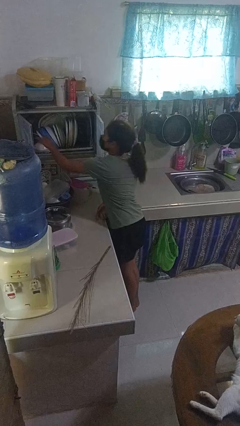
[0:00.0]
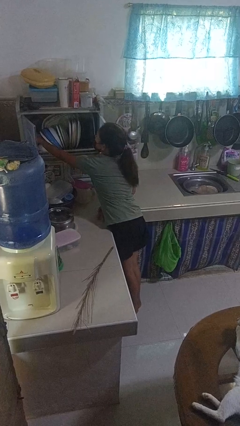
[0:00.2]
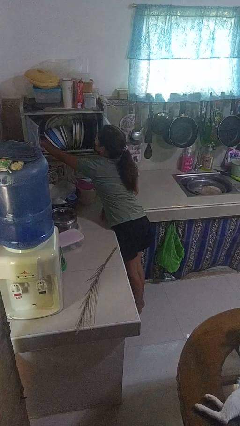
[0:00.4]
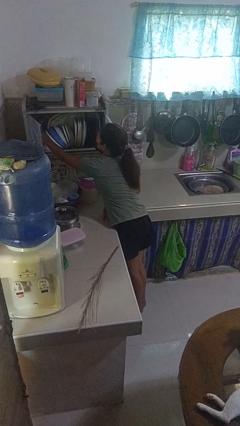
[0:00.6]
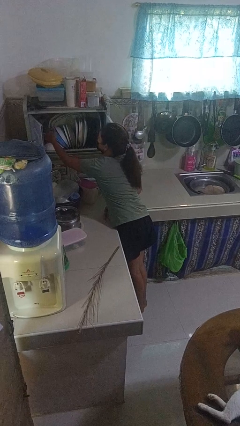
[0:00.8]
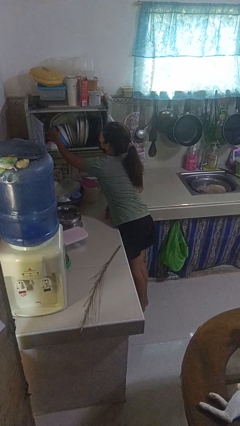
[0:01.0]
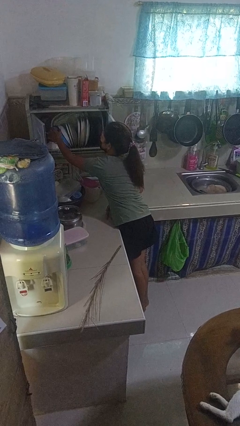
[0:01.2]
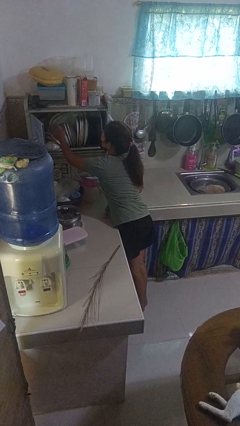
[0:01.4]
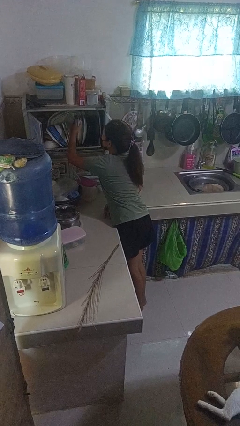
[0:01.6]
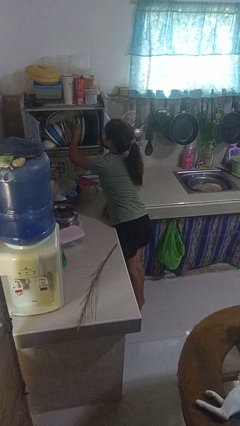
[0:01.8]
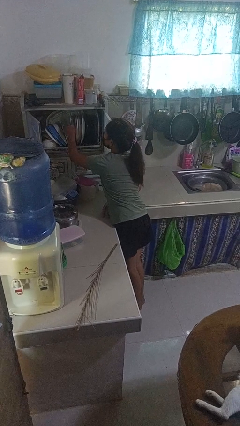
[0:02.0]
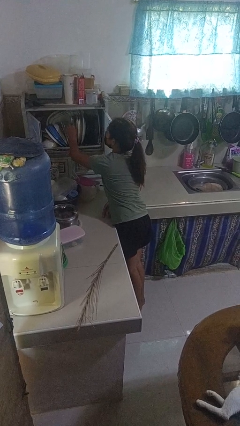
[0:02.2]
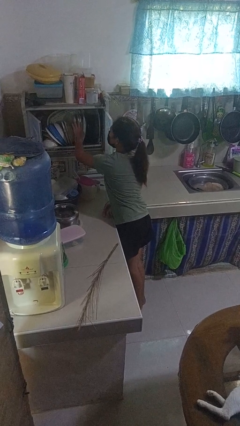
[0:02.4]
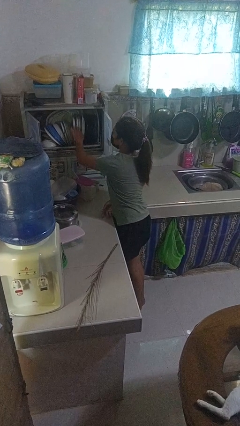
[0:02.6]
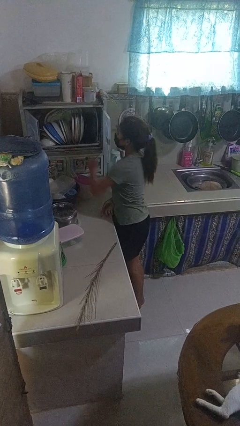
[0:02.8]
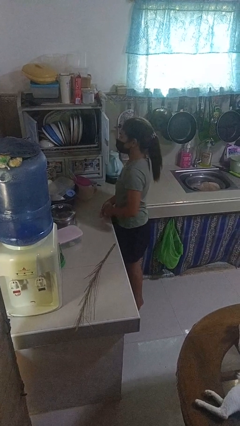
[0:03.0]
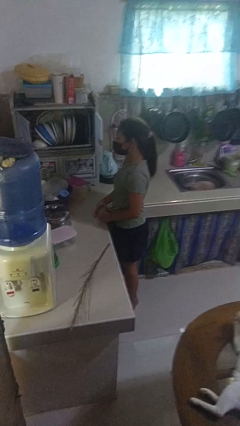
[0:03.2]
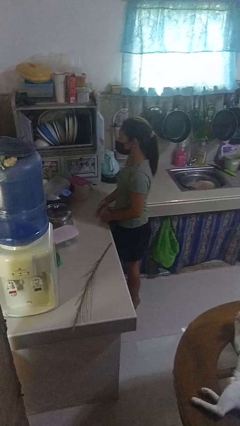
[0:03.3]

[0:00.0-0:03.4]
person searches in kitchen drawer

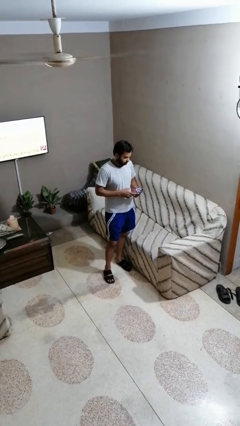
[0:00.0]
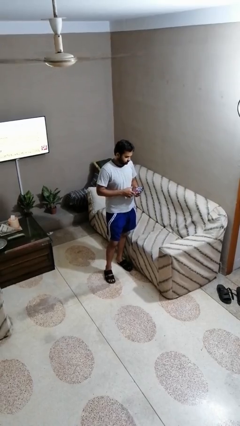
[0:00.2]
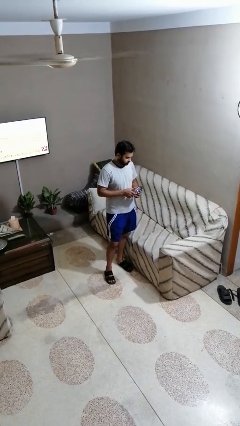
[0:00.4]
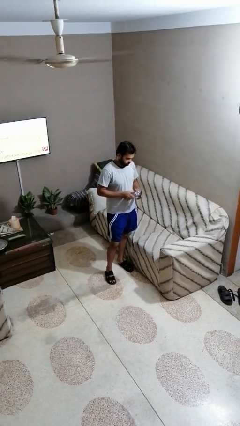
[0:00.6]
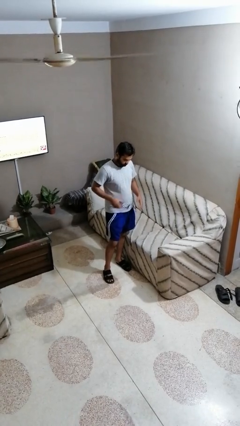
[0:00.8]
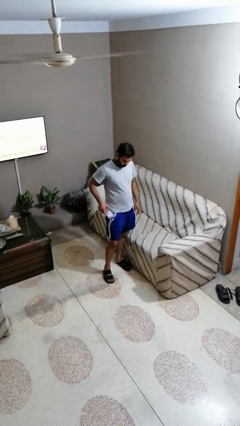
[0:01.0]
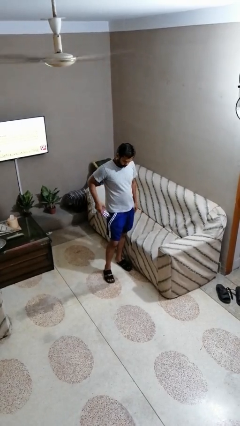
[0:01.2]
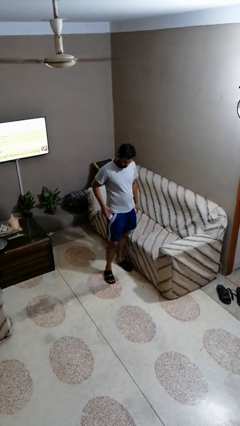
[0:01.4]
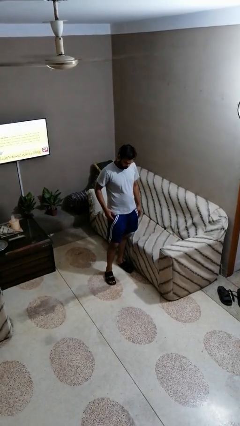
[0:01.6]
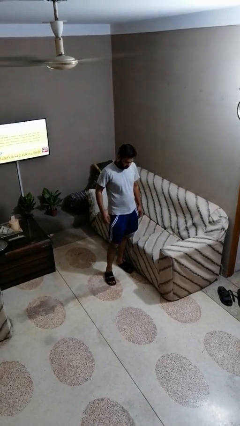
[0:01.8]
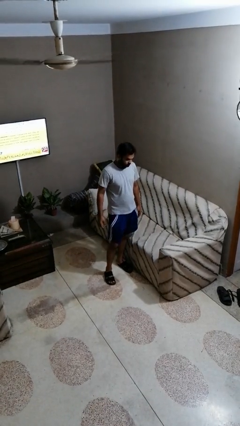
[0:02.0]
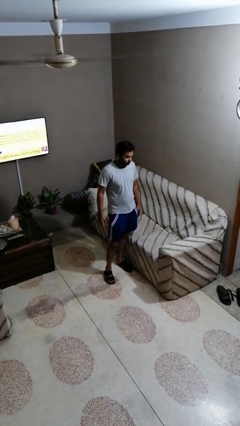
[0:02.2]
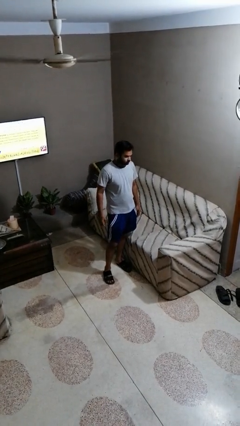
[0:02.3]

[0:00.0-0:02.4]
person puts phone into pocket

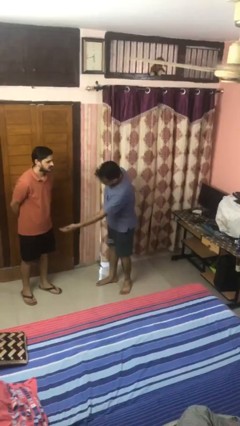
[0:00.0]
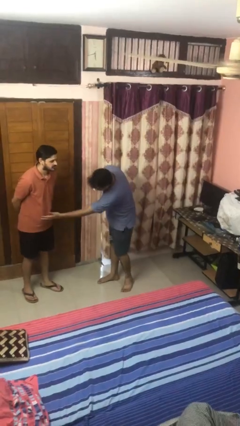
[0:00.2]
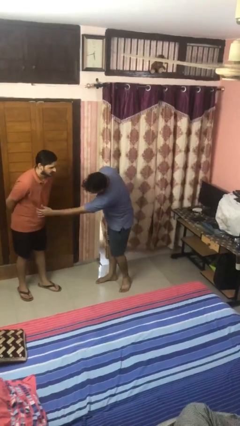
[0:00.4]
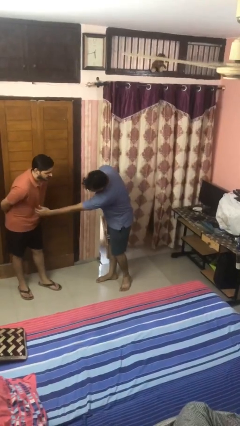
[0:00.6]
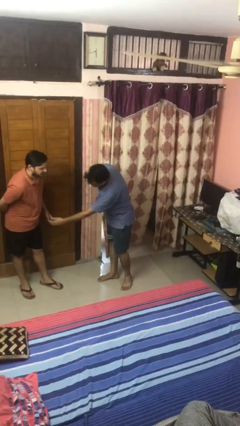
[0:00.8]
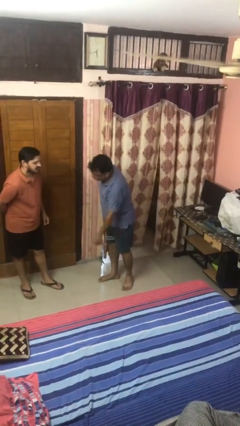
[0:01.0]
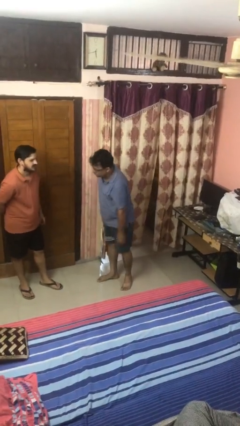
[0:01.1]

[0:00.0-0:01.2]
person tickles person

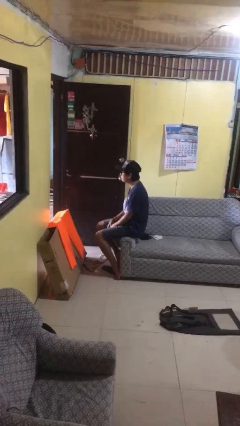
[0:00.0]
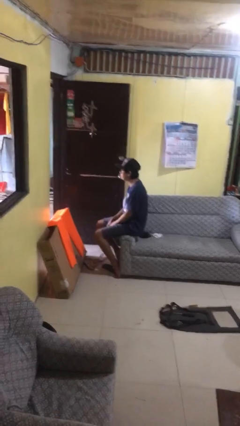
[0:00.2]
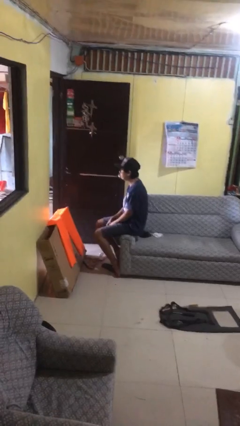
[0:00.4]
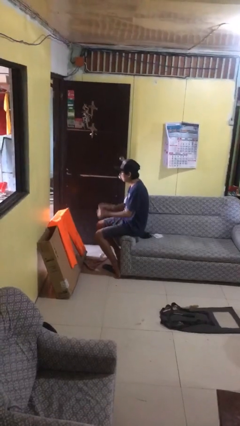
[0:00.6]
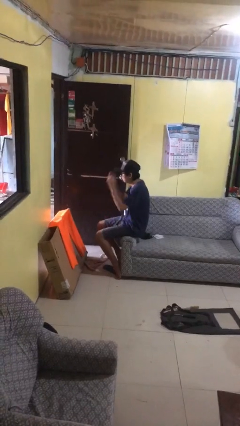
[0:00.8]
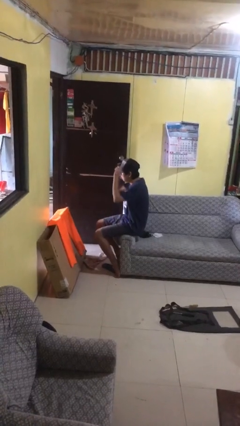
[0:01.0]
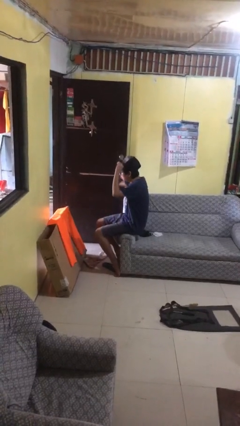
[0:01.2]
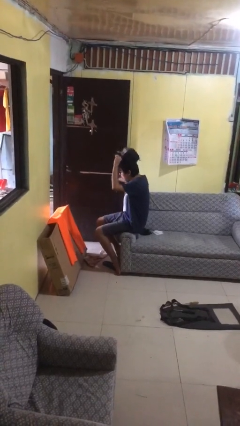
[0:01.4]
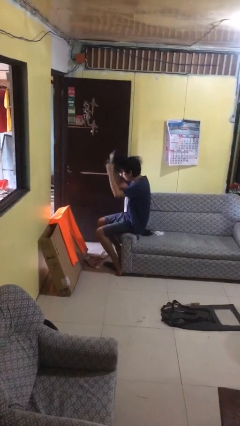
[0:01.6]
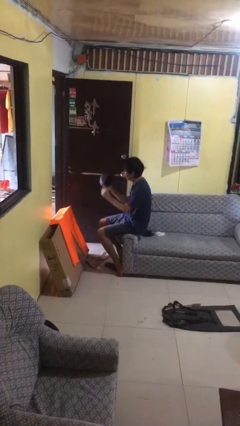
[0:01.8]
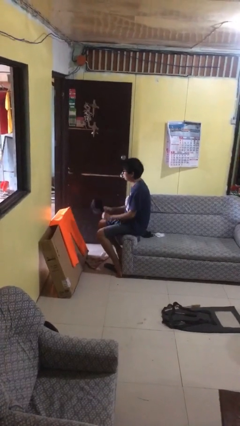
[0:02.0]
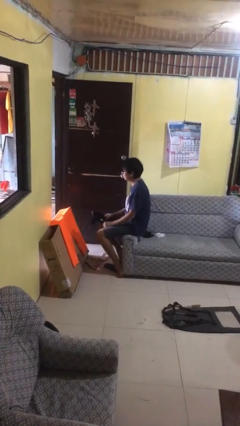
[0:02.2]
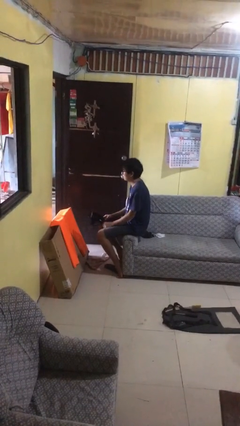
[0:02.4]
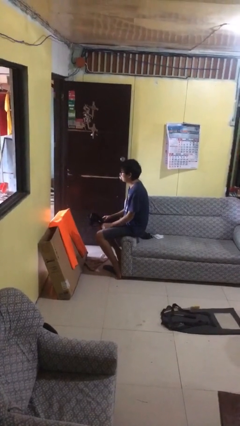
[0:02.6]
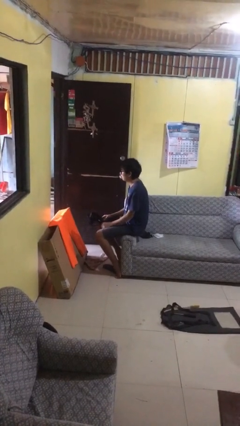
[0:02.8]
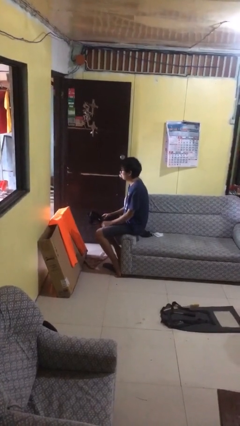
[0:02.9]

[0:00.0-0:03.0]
person takes off hat

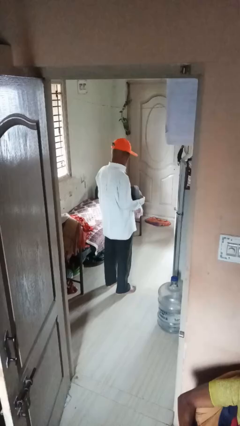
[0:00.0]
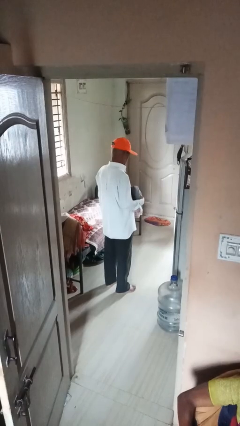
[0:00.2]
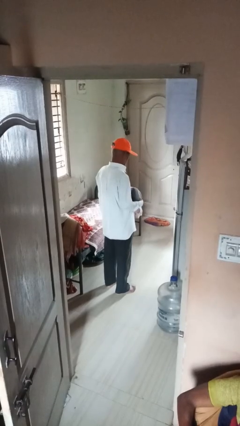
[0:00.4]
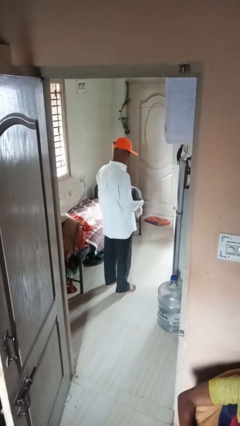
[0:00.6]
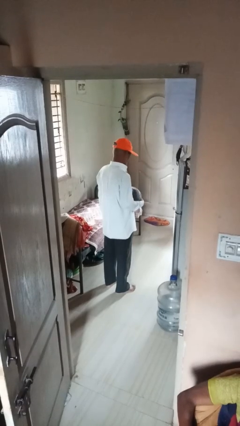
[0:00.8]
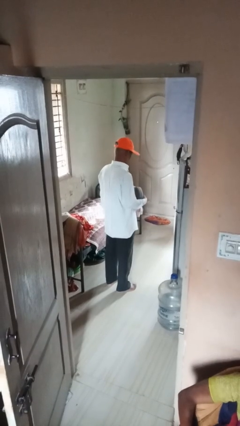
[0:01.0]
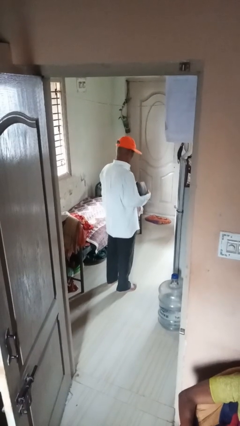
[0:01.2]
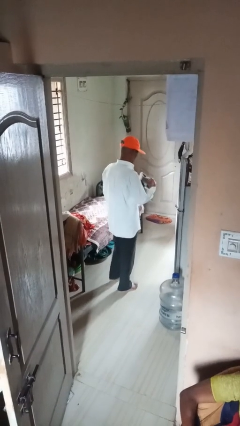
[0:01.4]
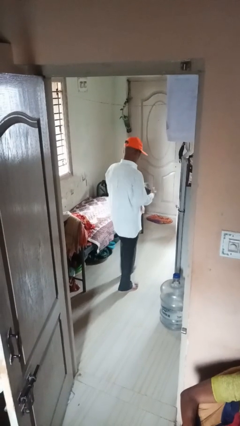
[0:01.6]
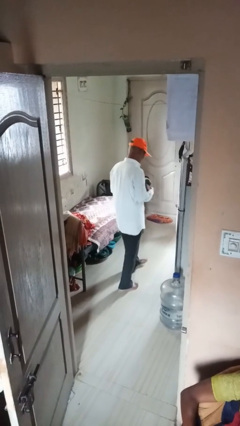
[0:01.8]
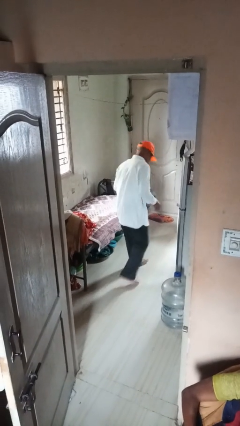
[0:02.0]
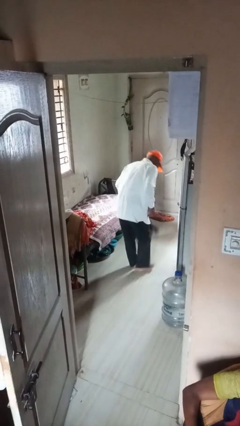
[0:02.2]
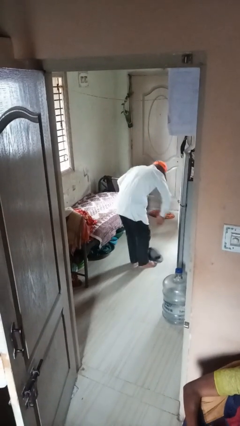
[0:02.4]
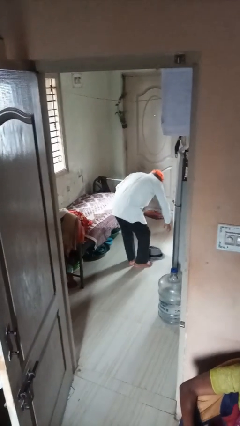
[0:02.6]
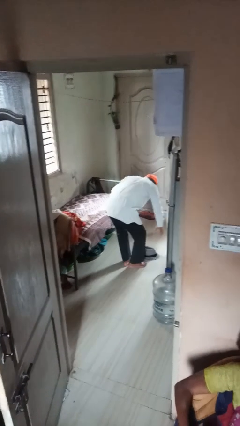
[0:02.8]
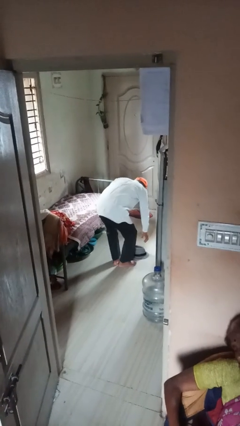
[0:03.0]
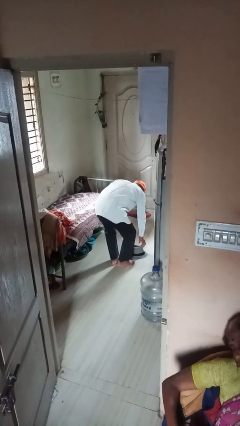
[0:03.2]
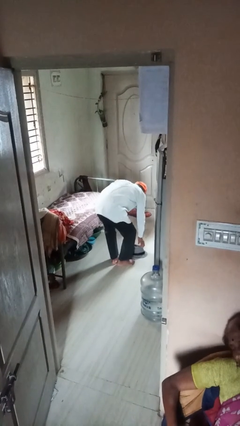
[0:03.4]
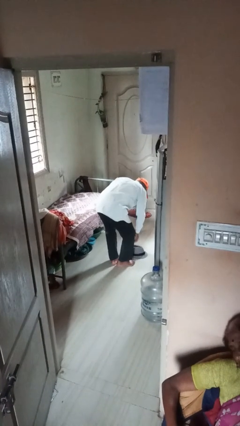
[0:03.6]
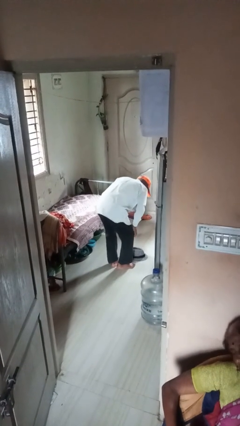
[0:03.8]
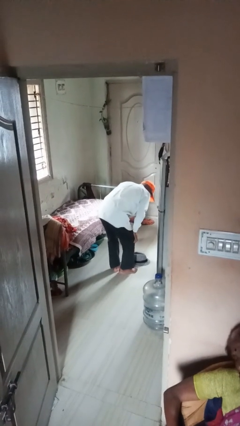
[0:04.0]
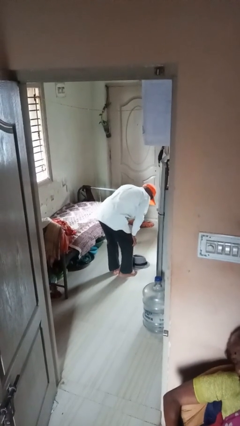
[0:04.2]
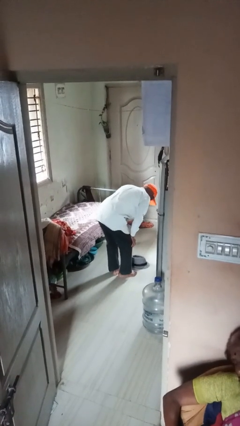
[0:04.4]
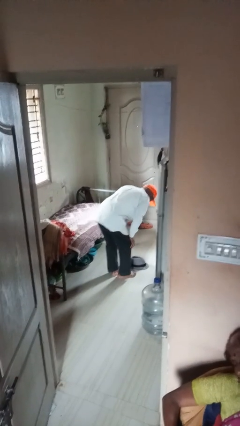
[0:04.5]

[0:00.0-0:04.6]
person drops object

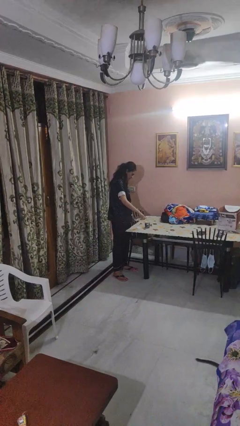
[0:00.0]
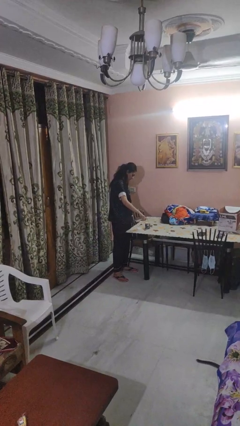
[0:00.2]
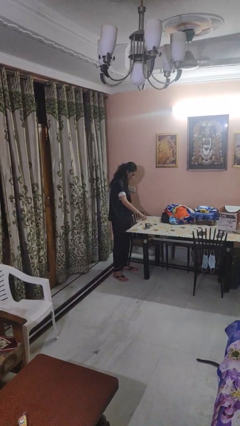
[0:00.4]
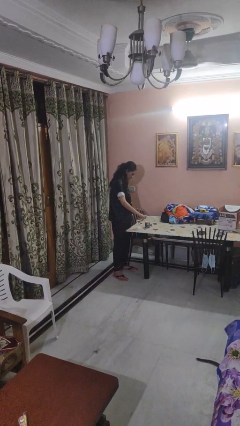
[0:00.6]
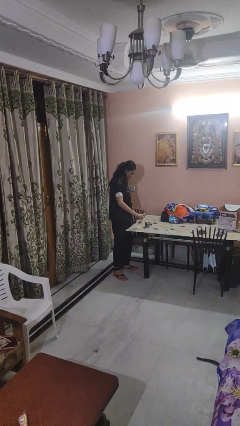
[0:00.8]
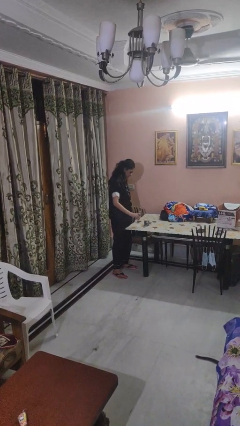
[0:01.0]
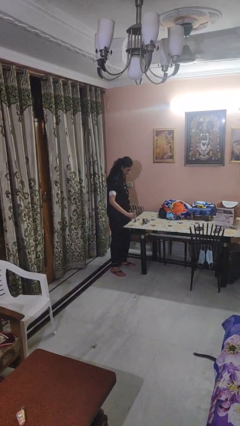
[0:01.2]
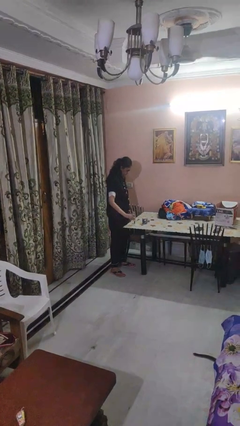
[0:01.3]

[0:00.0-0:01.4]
person pours liquid into cup

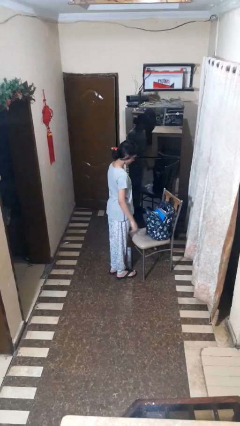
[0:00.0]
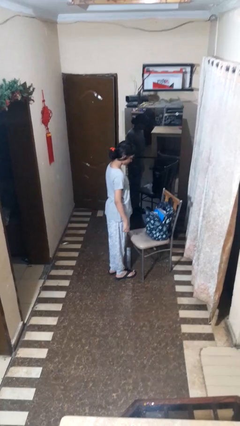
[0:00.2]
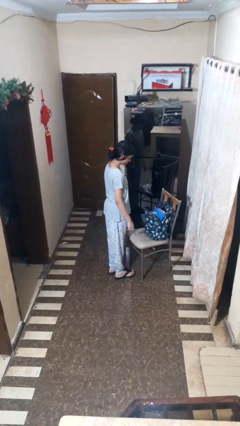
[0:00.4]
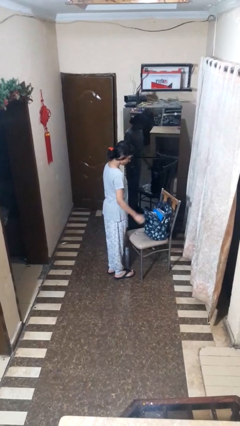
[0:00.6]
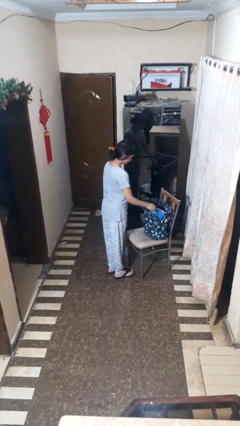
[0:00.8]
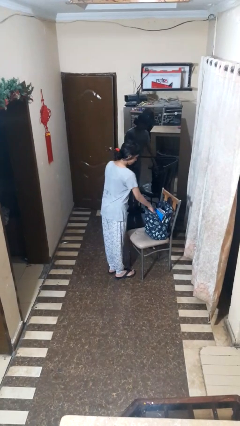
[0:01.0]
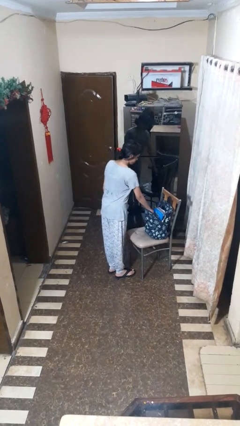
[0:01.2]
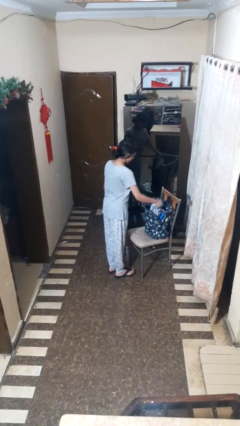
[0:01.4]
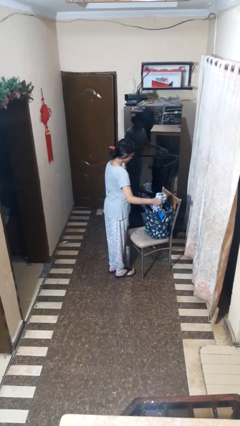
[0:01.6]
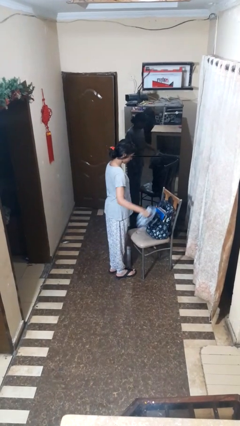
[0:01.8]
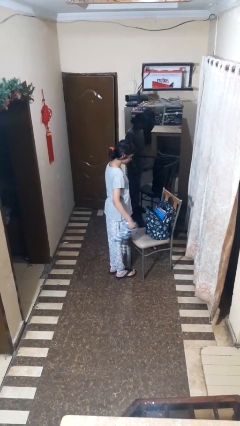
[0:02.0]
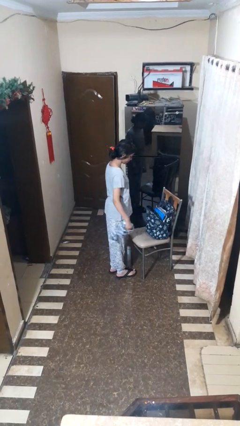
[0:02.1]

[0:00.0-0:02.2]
person takes object from bag
